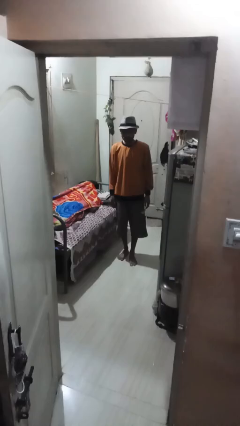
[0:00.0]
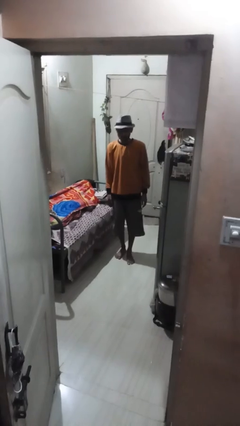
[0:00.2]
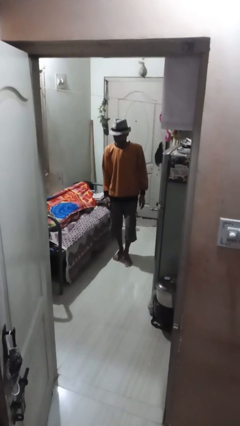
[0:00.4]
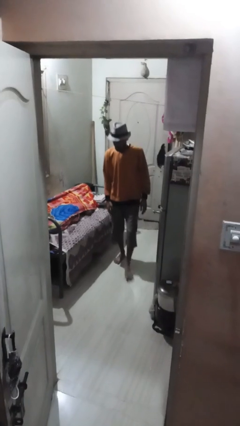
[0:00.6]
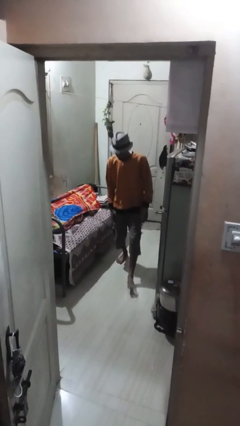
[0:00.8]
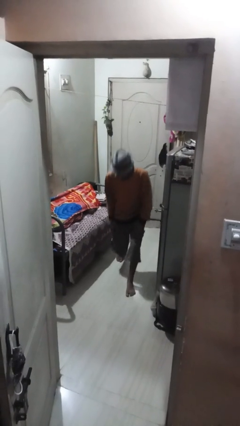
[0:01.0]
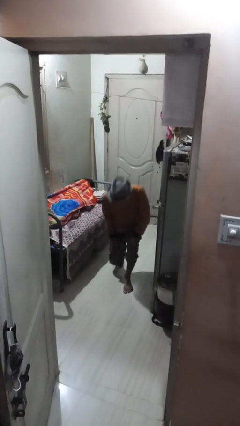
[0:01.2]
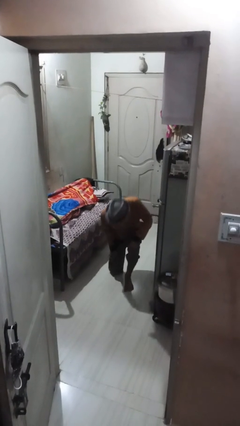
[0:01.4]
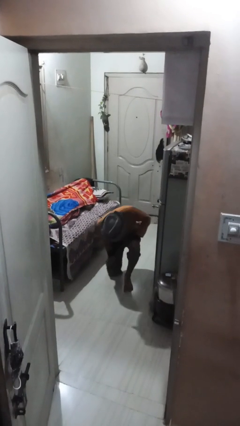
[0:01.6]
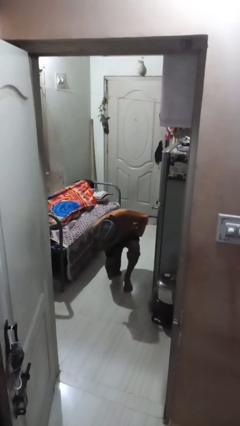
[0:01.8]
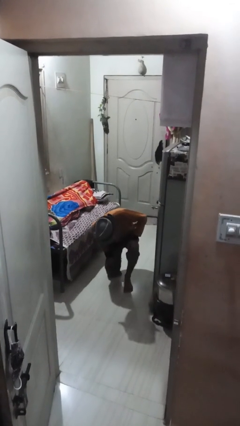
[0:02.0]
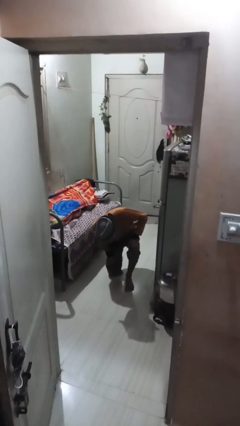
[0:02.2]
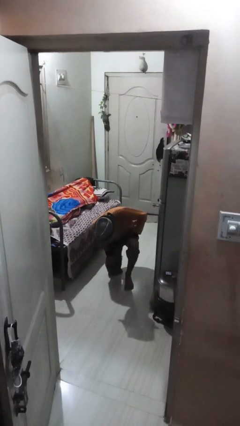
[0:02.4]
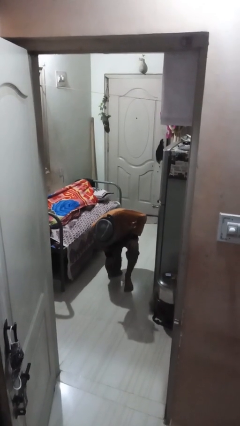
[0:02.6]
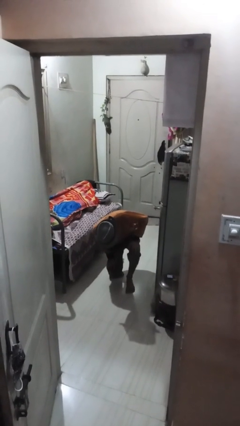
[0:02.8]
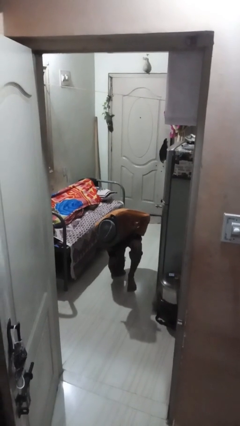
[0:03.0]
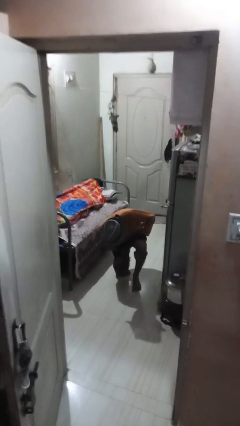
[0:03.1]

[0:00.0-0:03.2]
person kneels

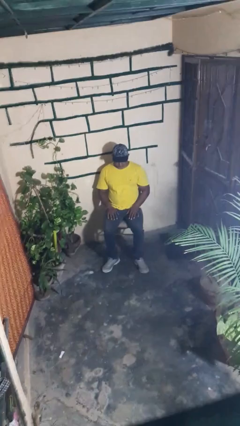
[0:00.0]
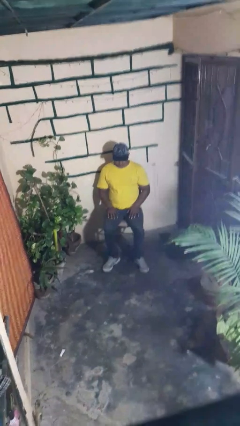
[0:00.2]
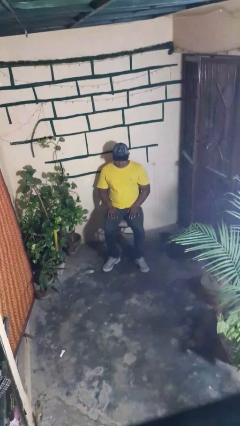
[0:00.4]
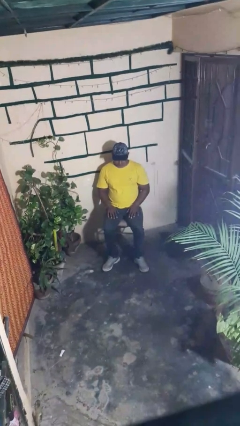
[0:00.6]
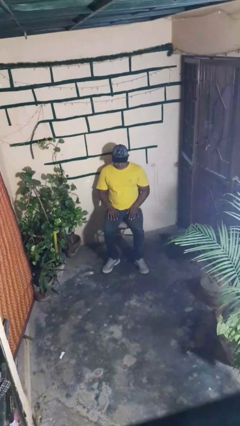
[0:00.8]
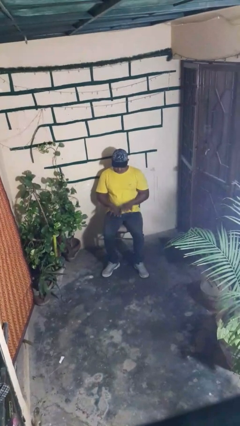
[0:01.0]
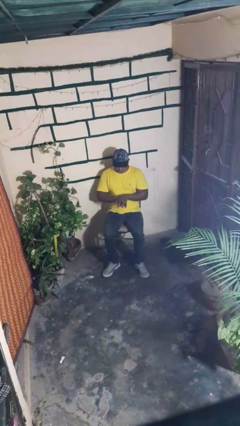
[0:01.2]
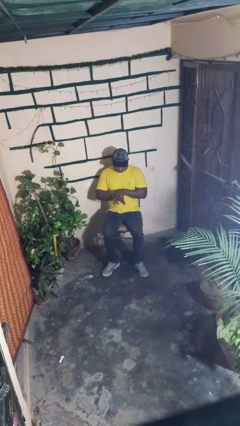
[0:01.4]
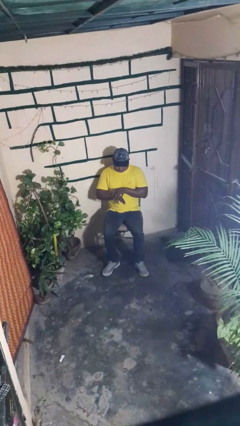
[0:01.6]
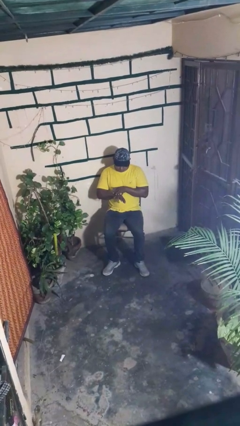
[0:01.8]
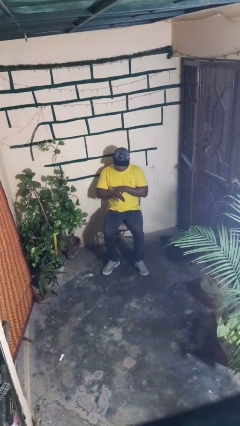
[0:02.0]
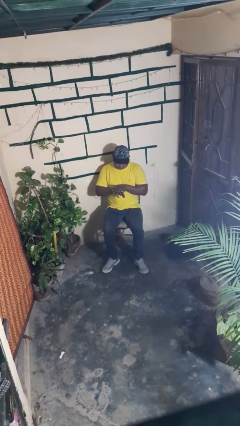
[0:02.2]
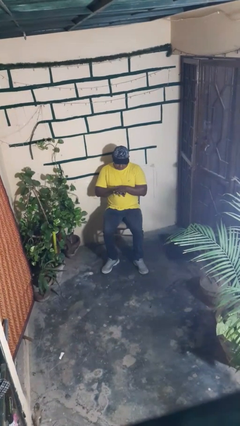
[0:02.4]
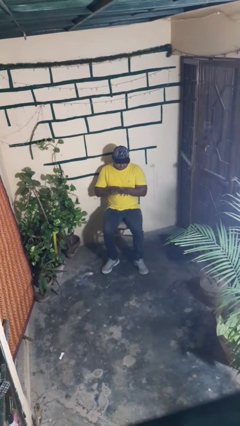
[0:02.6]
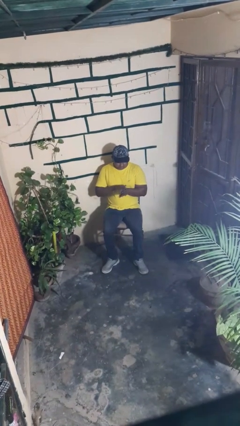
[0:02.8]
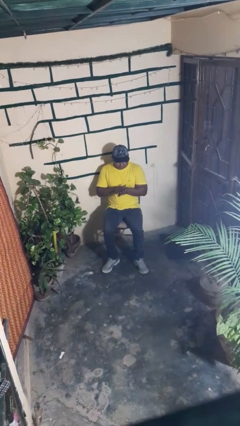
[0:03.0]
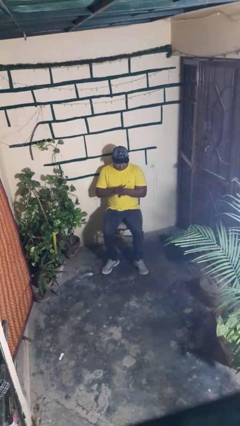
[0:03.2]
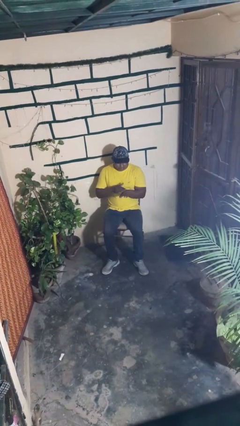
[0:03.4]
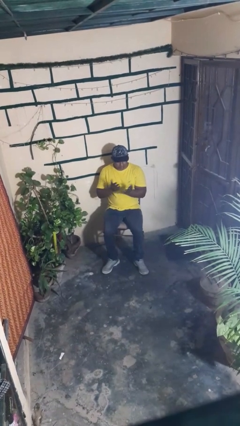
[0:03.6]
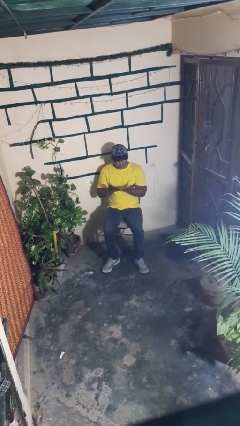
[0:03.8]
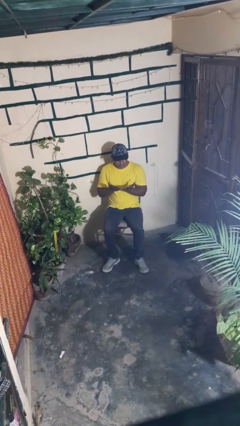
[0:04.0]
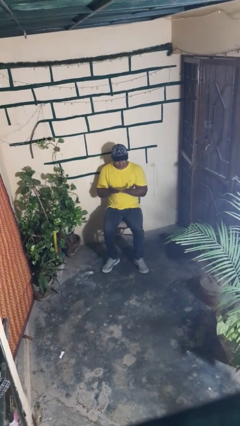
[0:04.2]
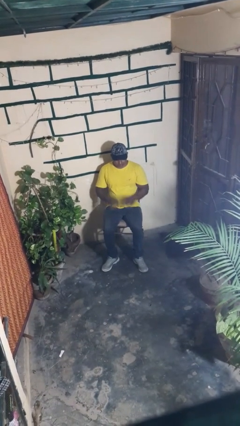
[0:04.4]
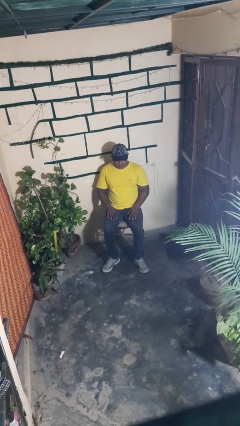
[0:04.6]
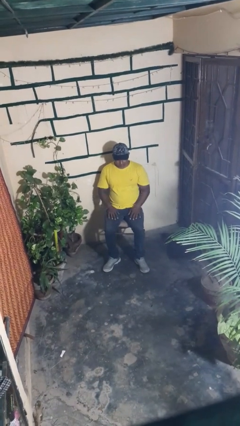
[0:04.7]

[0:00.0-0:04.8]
person looks at hands in lap

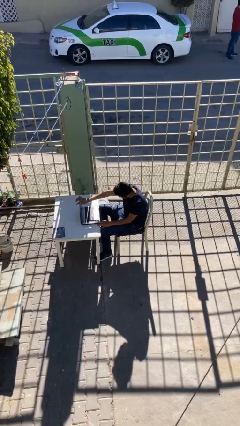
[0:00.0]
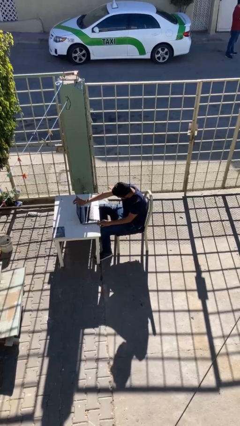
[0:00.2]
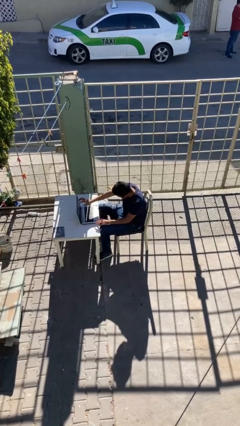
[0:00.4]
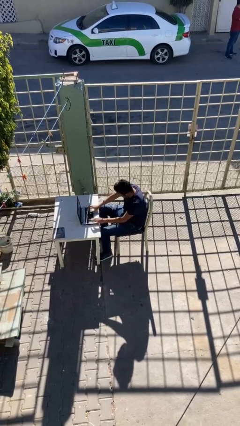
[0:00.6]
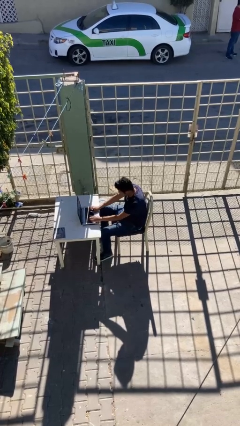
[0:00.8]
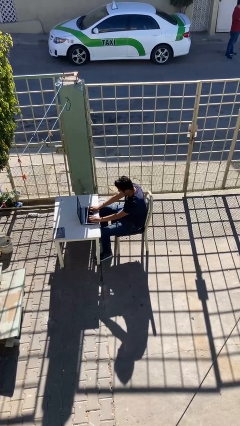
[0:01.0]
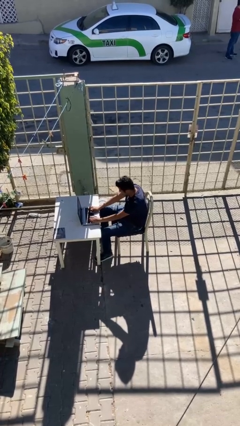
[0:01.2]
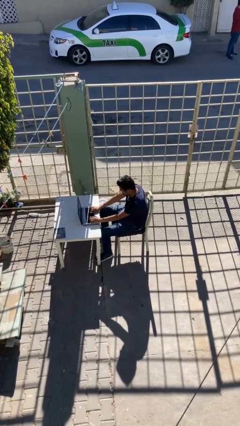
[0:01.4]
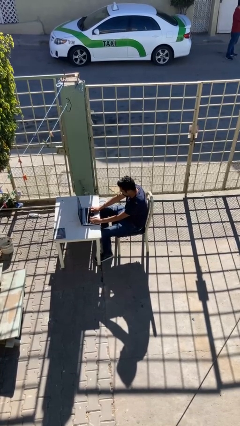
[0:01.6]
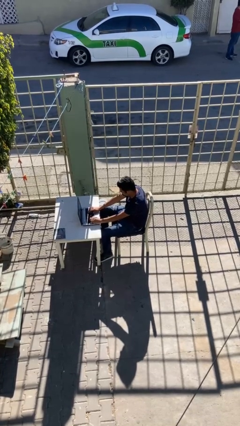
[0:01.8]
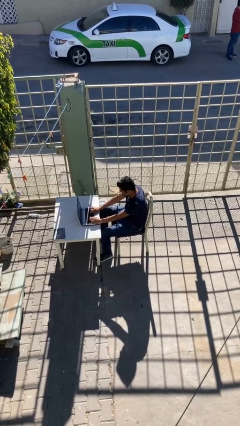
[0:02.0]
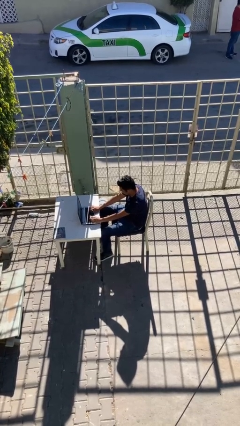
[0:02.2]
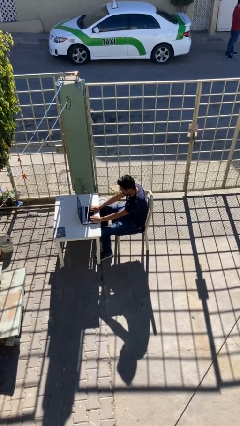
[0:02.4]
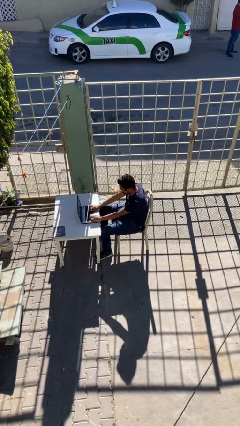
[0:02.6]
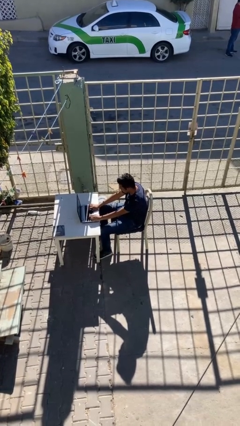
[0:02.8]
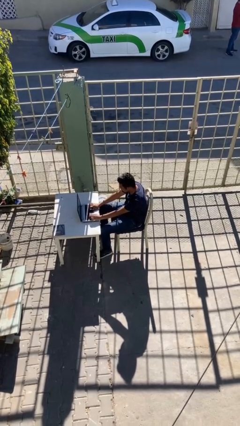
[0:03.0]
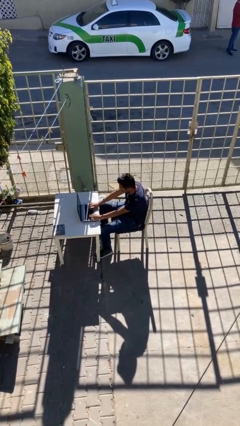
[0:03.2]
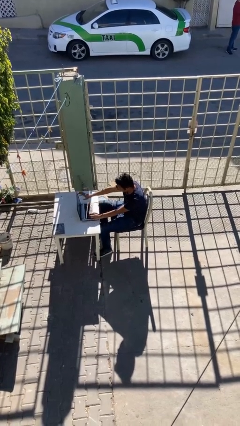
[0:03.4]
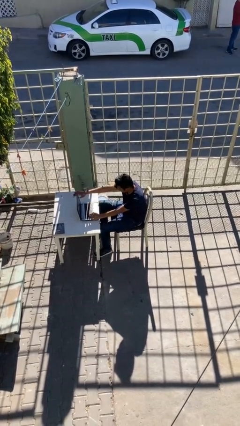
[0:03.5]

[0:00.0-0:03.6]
person interacts with laptop

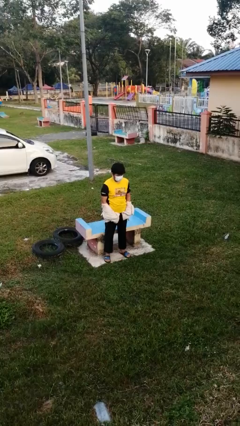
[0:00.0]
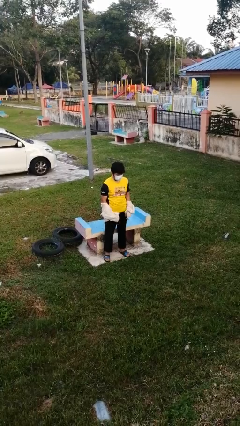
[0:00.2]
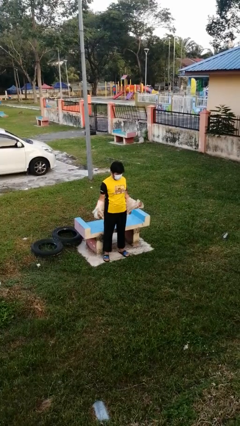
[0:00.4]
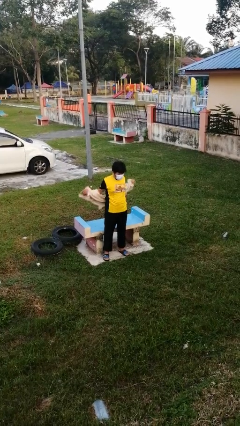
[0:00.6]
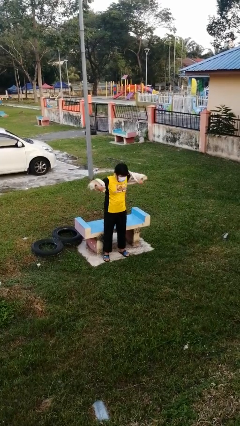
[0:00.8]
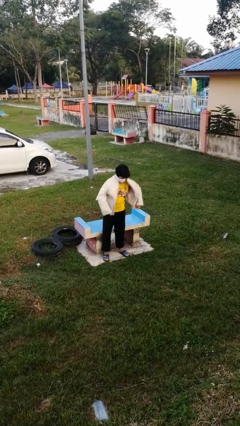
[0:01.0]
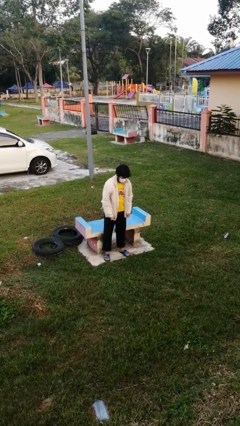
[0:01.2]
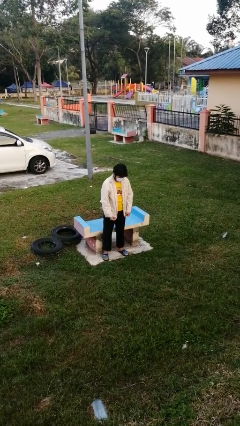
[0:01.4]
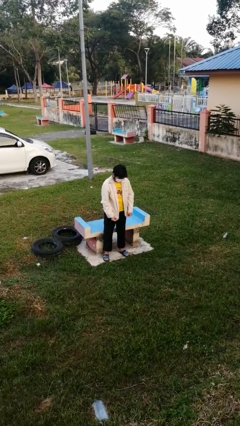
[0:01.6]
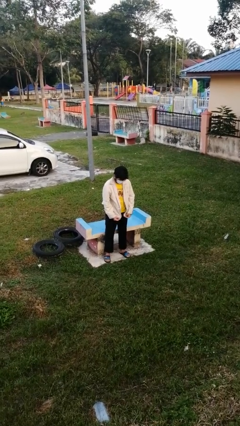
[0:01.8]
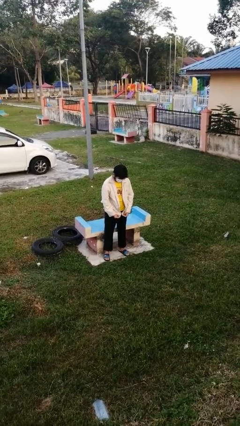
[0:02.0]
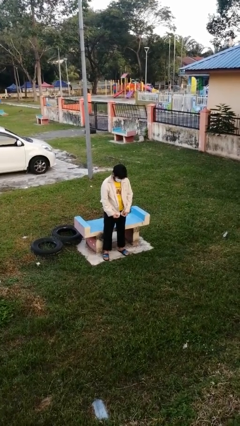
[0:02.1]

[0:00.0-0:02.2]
person puts on jacket

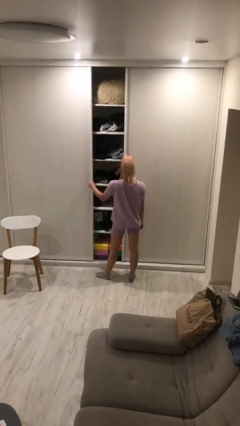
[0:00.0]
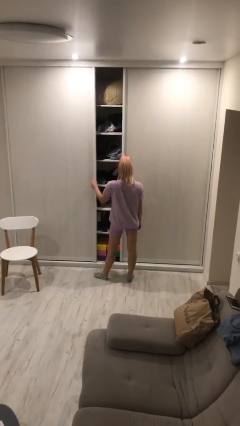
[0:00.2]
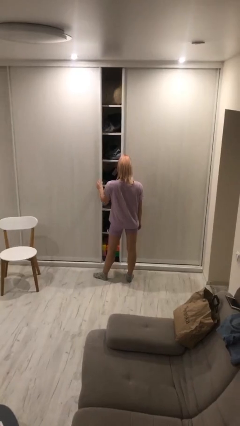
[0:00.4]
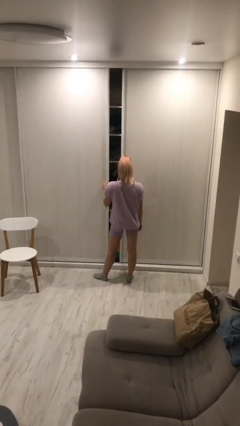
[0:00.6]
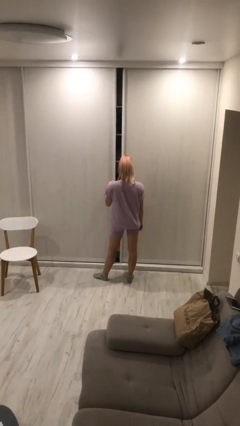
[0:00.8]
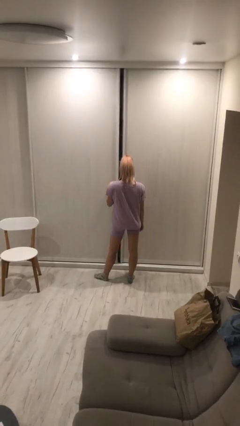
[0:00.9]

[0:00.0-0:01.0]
person closes sliding door

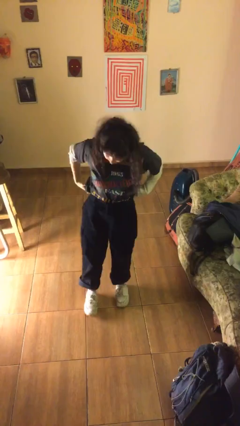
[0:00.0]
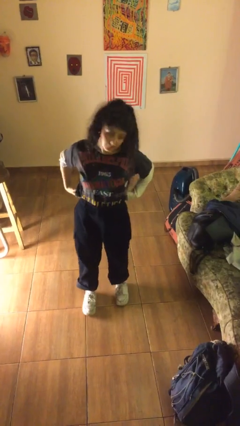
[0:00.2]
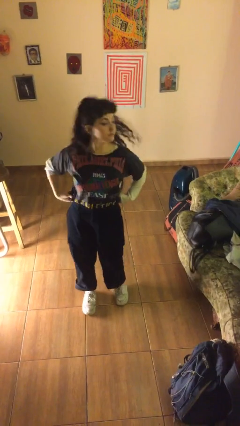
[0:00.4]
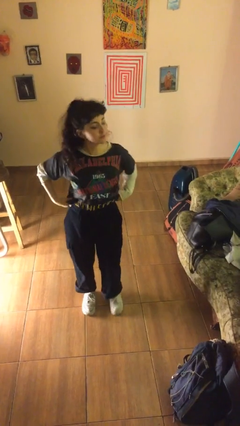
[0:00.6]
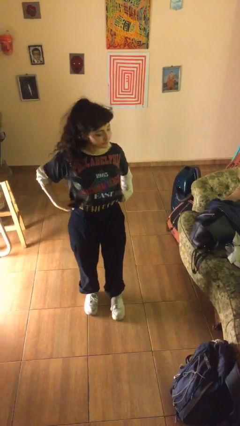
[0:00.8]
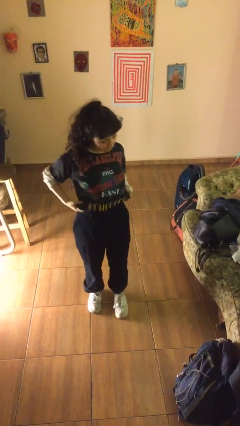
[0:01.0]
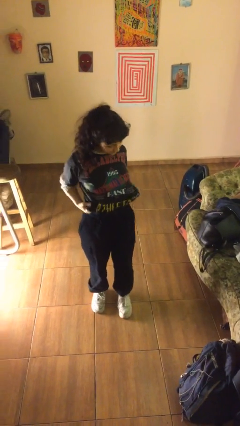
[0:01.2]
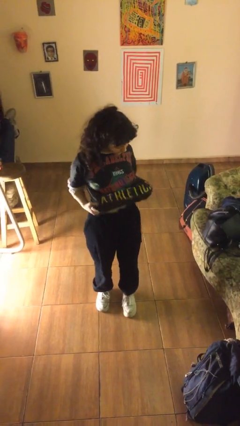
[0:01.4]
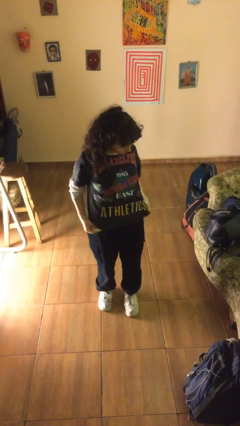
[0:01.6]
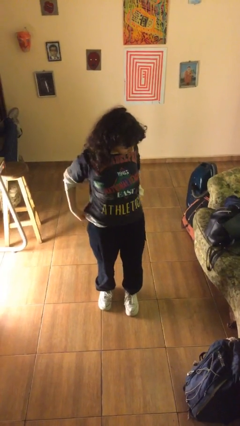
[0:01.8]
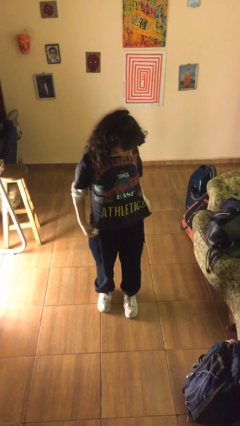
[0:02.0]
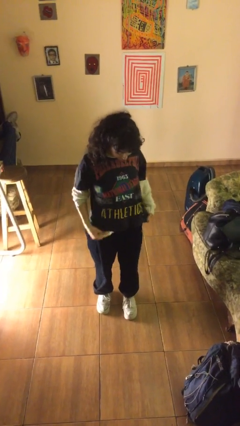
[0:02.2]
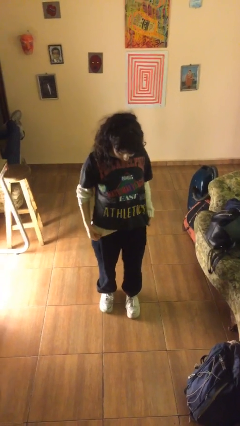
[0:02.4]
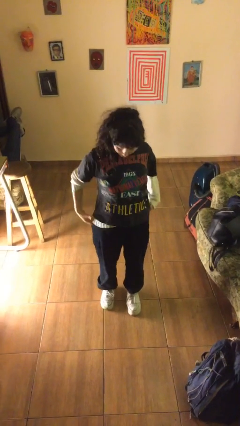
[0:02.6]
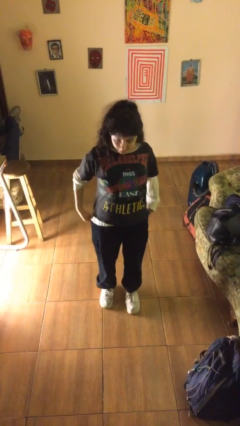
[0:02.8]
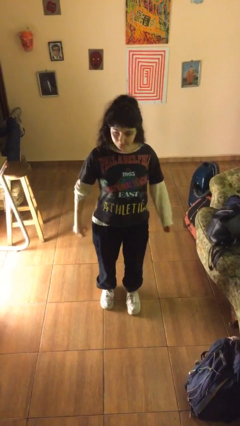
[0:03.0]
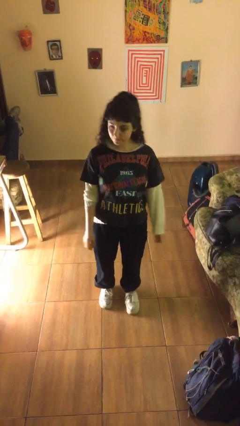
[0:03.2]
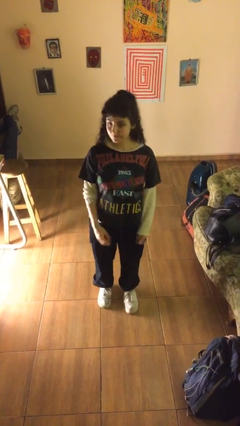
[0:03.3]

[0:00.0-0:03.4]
person untucks shirt
